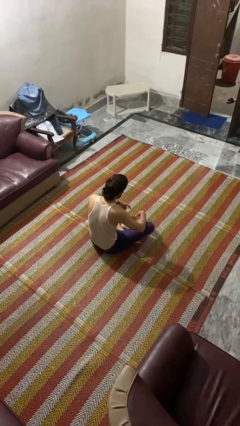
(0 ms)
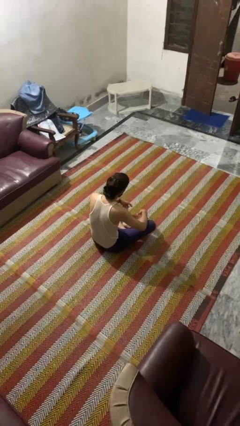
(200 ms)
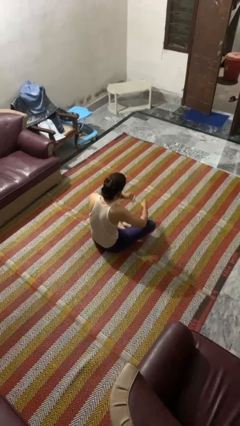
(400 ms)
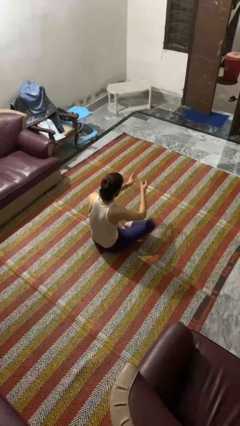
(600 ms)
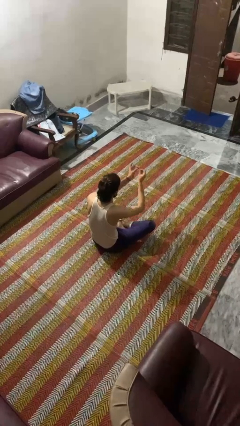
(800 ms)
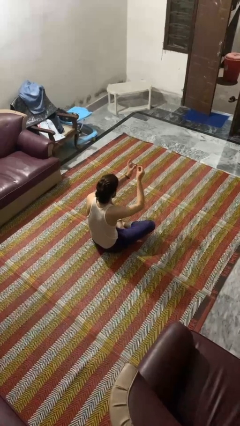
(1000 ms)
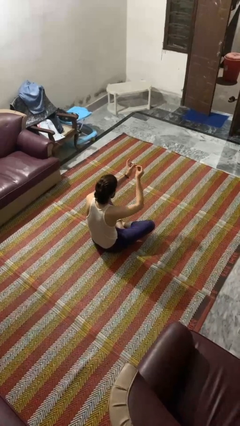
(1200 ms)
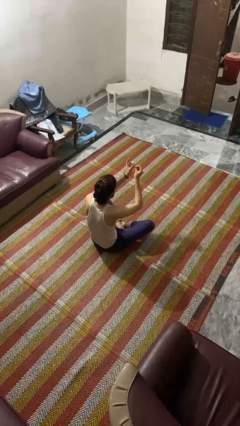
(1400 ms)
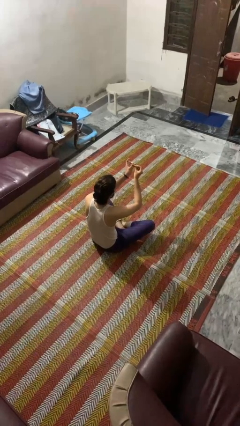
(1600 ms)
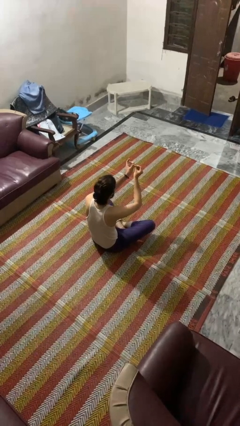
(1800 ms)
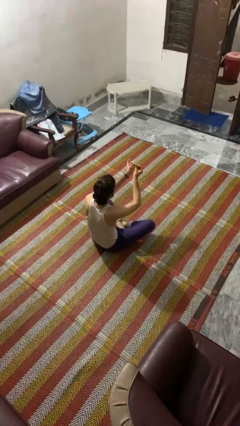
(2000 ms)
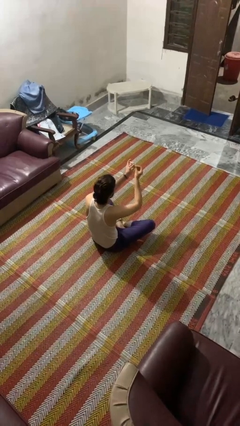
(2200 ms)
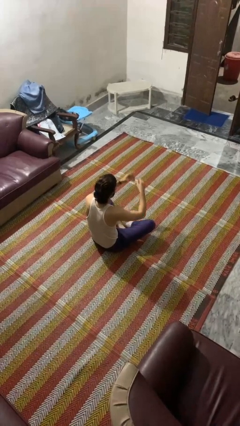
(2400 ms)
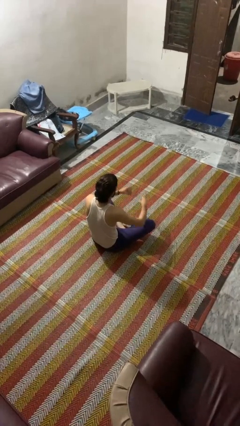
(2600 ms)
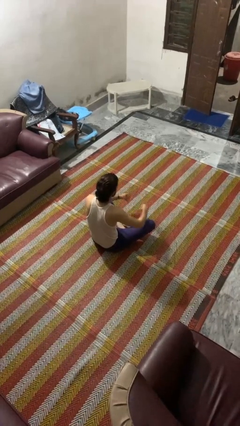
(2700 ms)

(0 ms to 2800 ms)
person clips fingernails

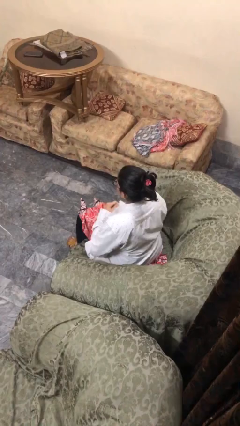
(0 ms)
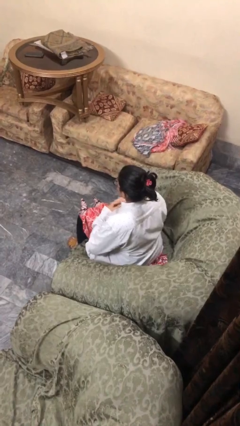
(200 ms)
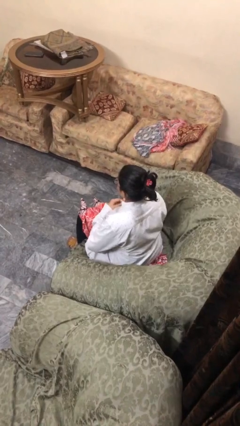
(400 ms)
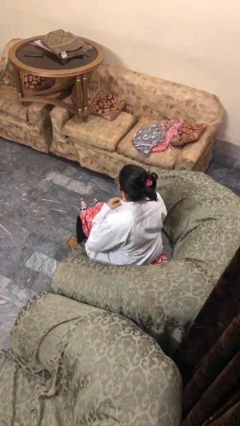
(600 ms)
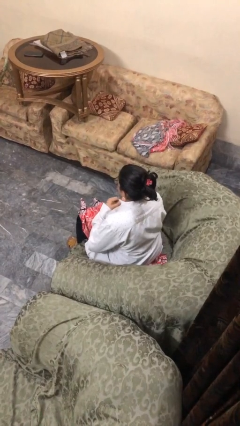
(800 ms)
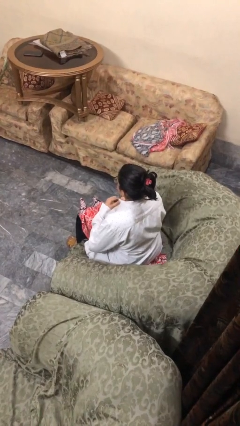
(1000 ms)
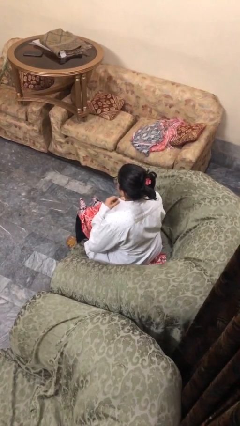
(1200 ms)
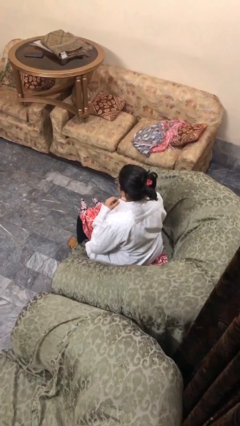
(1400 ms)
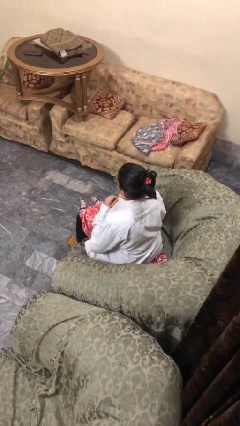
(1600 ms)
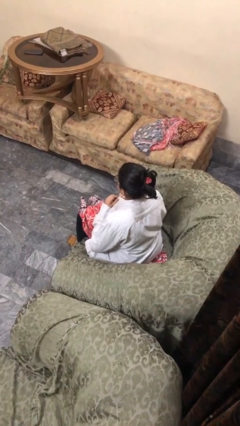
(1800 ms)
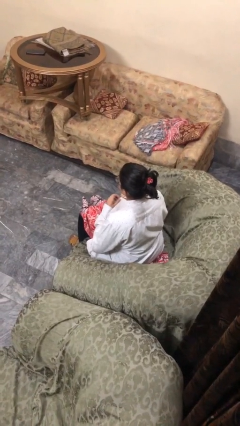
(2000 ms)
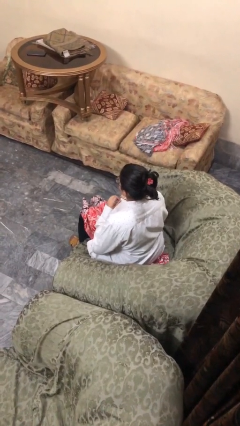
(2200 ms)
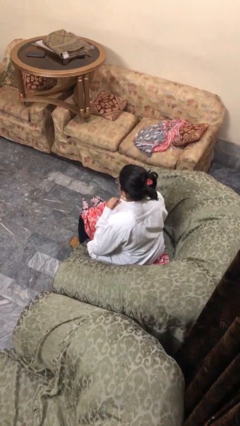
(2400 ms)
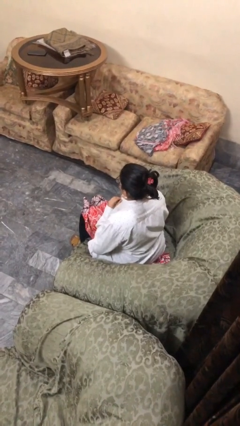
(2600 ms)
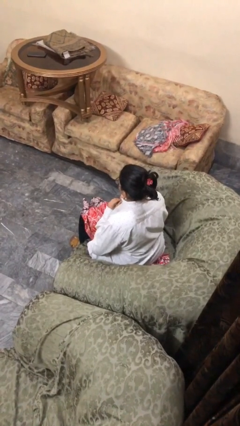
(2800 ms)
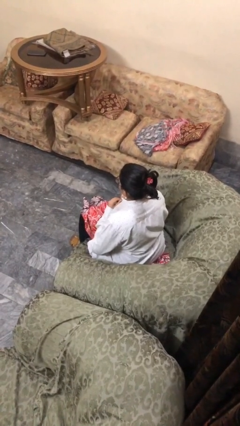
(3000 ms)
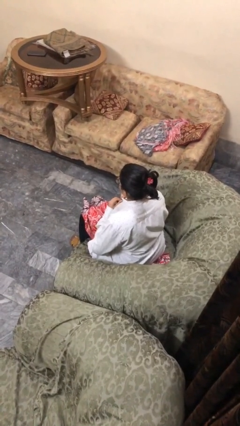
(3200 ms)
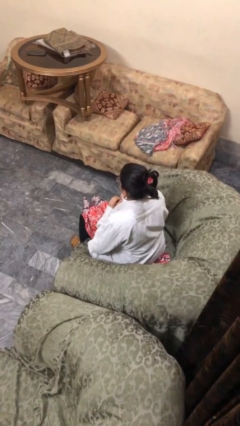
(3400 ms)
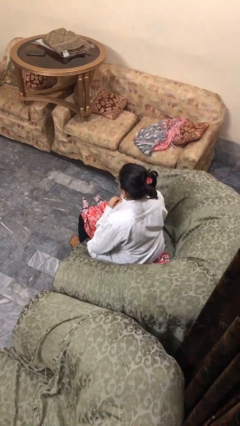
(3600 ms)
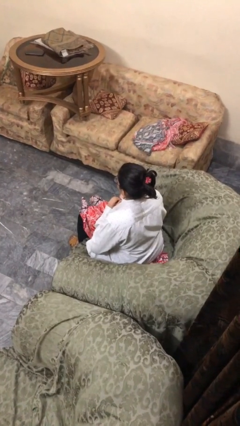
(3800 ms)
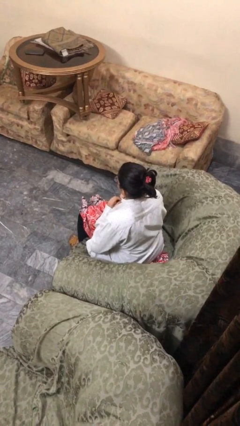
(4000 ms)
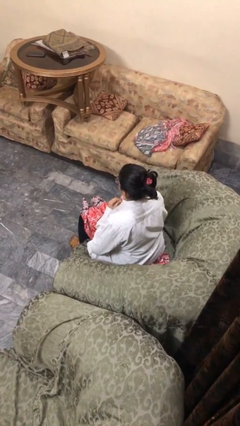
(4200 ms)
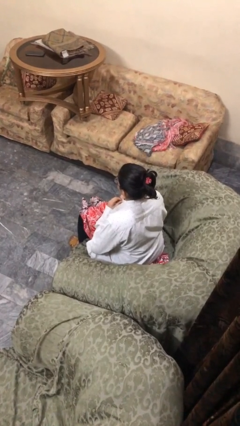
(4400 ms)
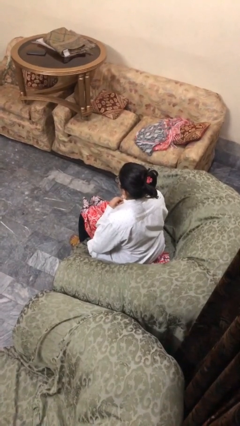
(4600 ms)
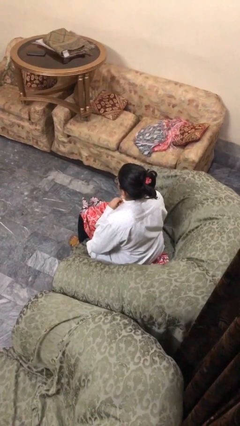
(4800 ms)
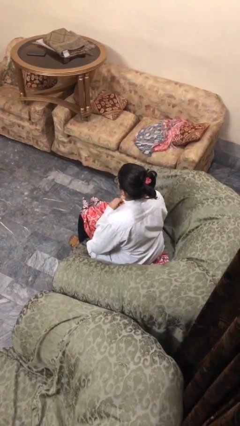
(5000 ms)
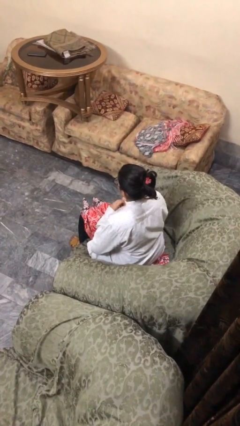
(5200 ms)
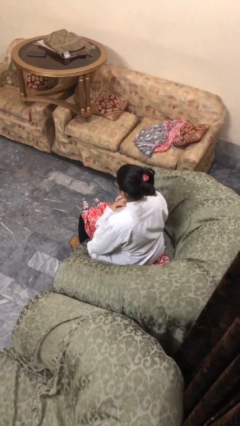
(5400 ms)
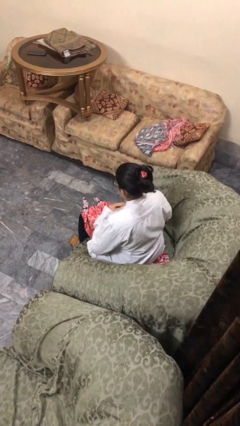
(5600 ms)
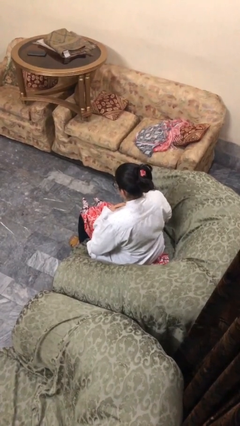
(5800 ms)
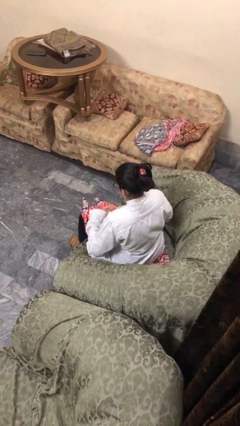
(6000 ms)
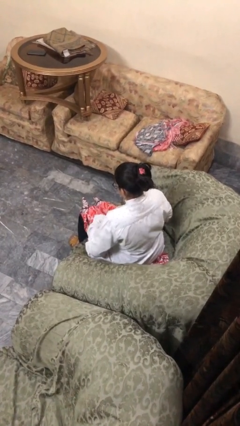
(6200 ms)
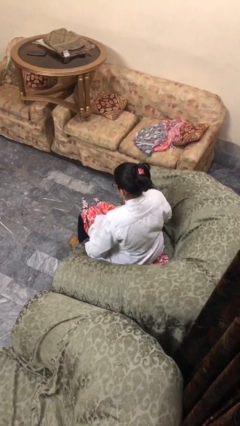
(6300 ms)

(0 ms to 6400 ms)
person buttons shirt

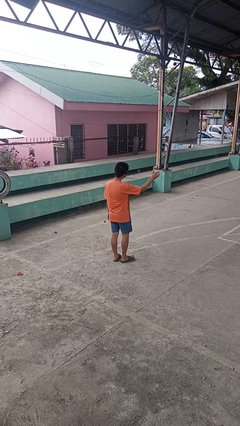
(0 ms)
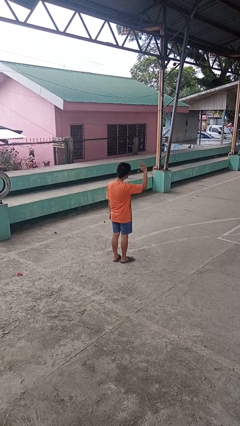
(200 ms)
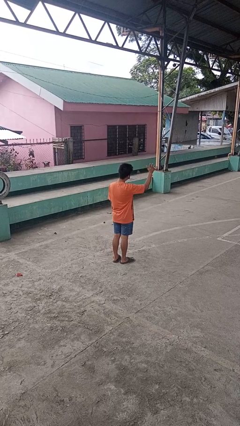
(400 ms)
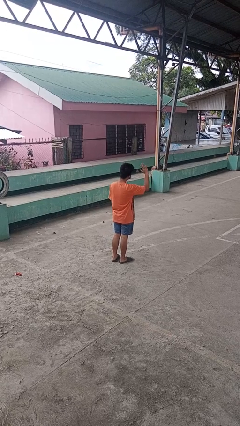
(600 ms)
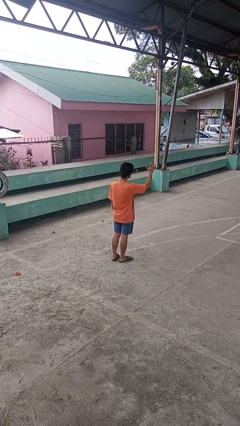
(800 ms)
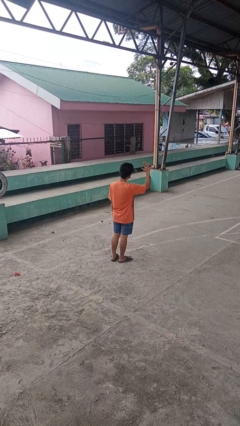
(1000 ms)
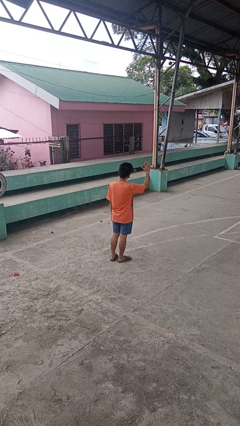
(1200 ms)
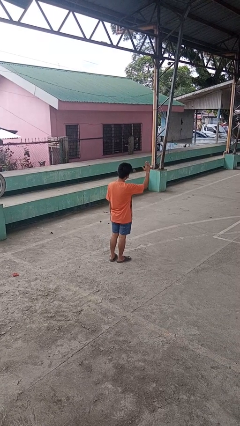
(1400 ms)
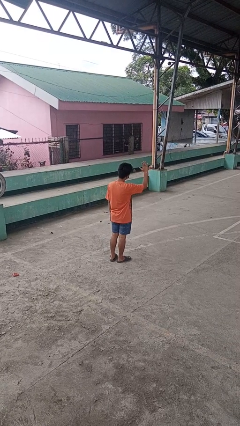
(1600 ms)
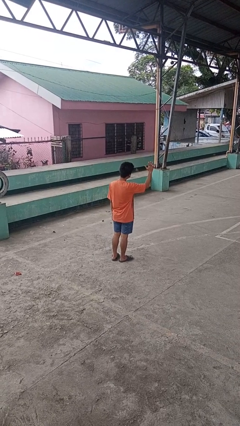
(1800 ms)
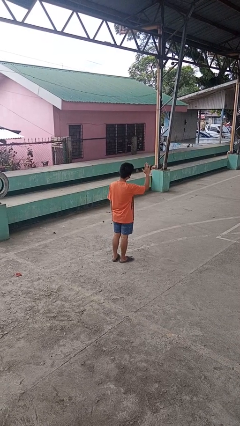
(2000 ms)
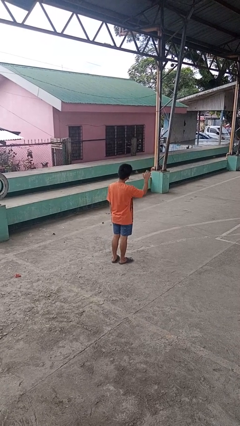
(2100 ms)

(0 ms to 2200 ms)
person waves at person

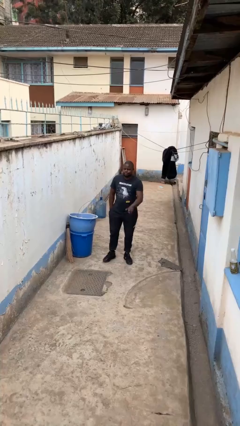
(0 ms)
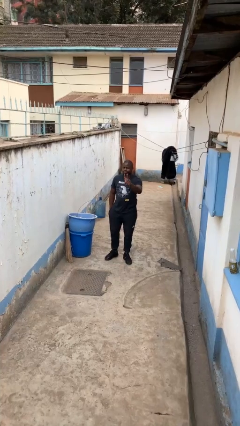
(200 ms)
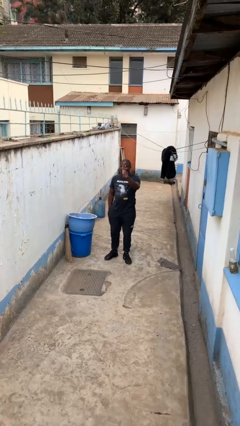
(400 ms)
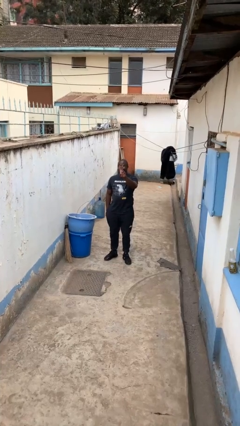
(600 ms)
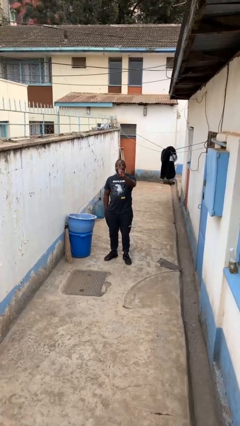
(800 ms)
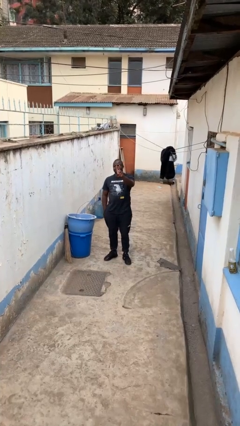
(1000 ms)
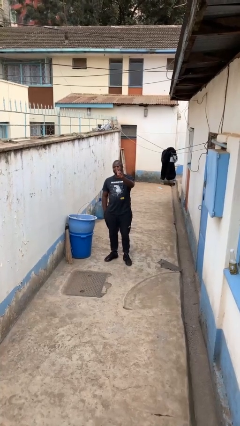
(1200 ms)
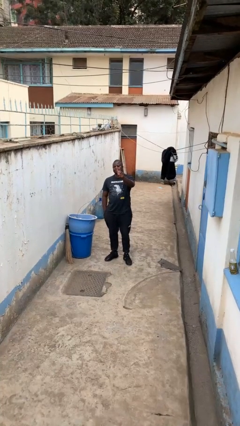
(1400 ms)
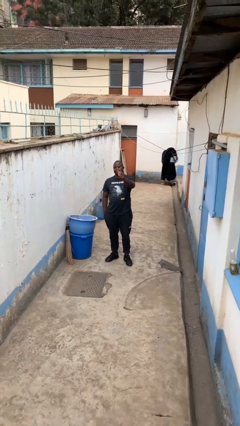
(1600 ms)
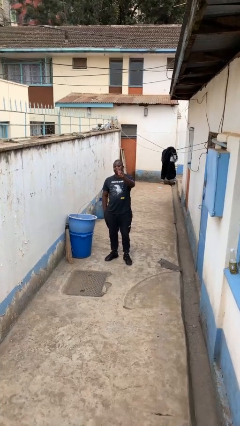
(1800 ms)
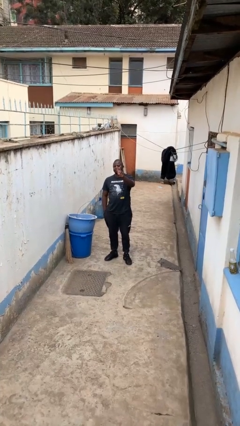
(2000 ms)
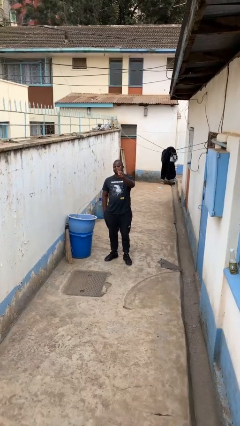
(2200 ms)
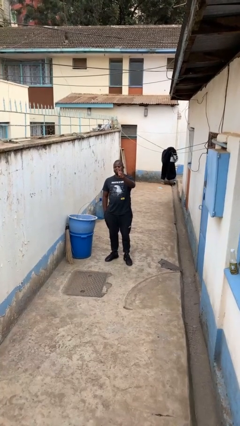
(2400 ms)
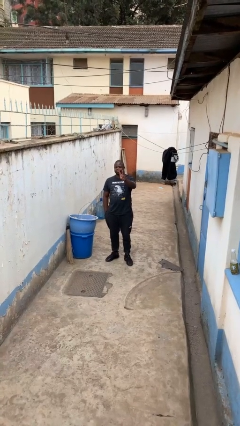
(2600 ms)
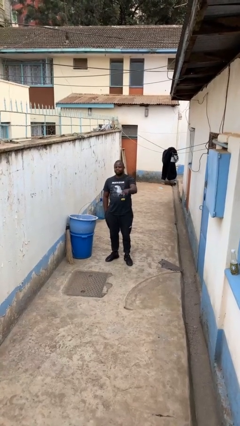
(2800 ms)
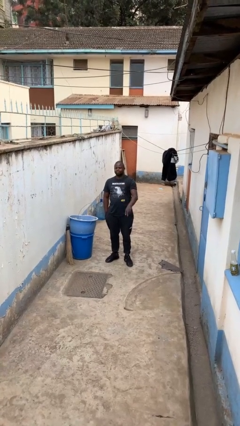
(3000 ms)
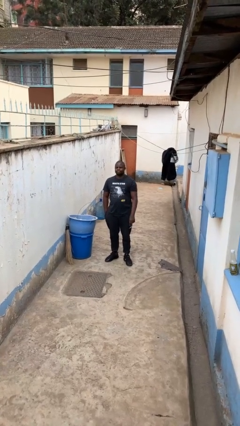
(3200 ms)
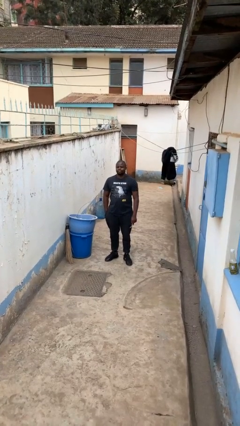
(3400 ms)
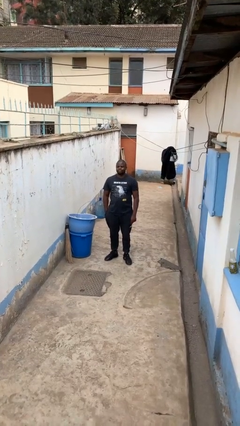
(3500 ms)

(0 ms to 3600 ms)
person gestures peace

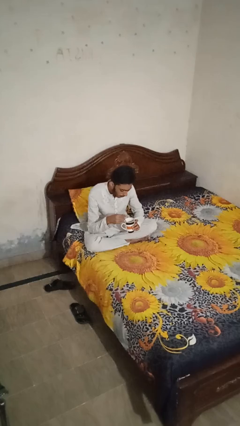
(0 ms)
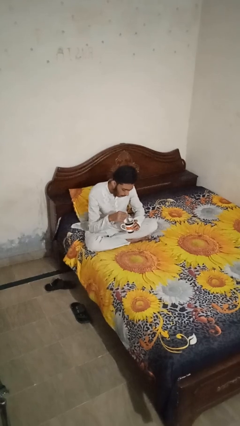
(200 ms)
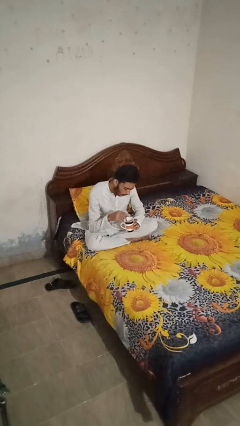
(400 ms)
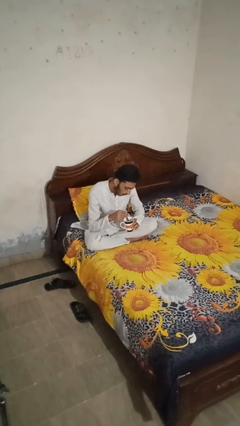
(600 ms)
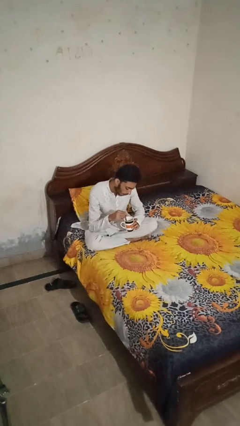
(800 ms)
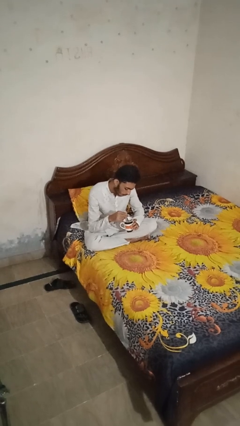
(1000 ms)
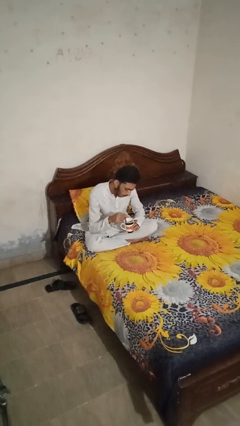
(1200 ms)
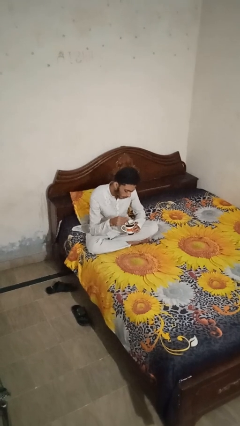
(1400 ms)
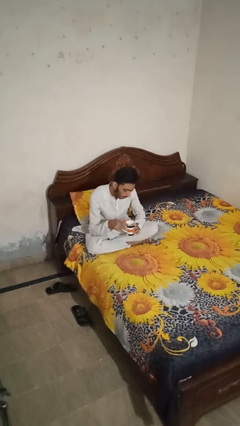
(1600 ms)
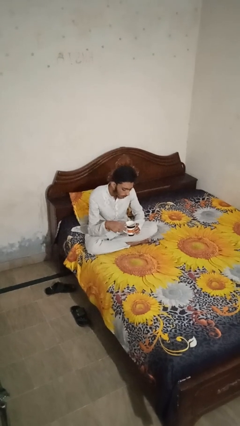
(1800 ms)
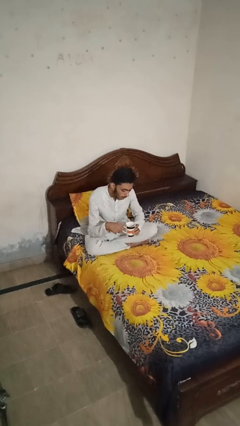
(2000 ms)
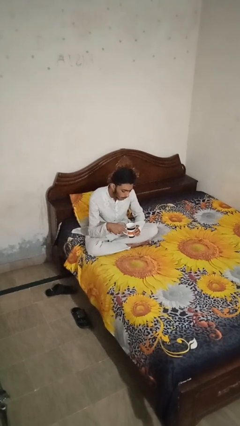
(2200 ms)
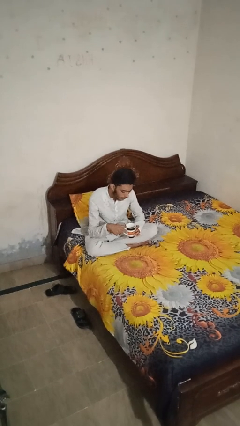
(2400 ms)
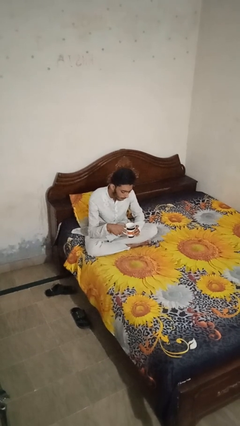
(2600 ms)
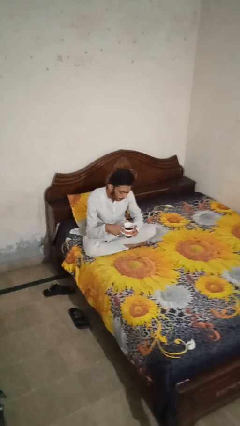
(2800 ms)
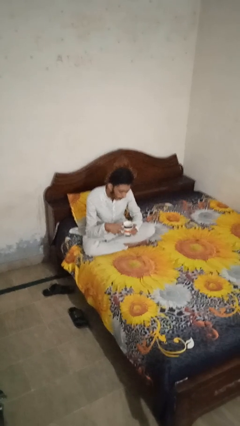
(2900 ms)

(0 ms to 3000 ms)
person stirs mug
